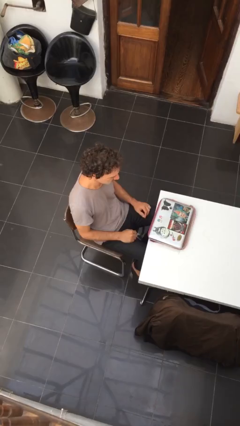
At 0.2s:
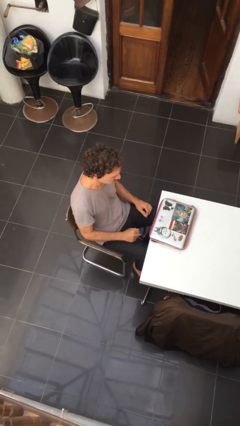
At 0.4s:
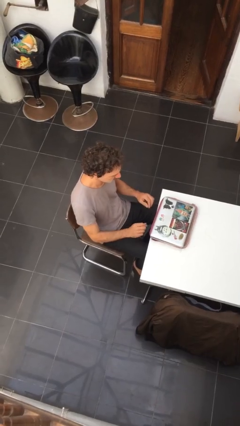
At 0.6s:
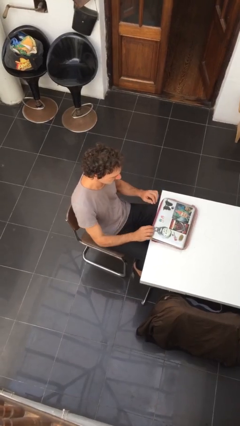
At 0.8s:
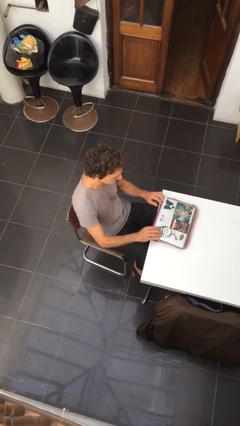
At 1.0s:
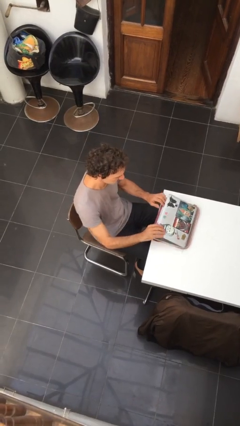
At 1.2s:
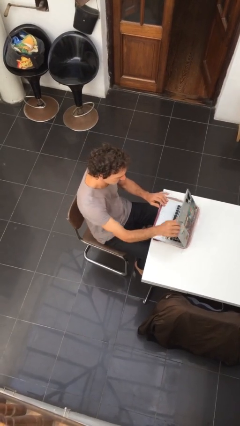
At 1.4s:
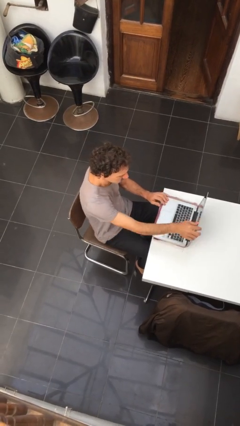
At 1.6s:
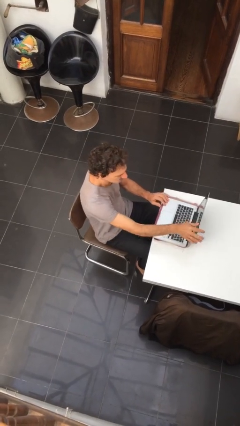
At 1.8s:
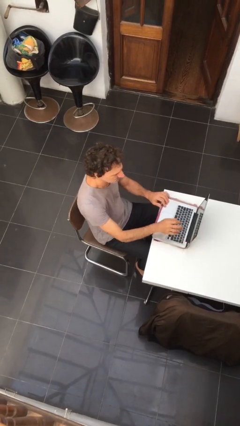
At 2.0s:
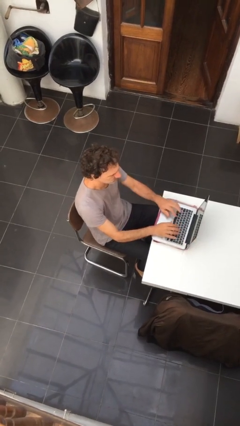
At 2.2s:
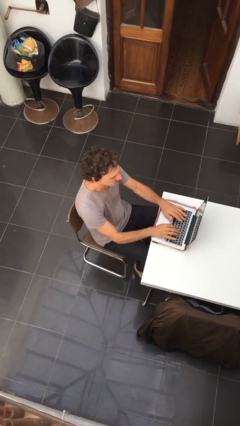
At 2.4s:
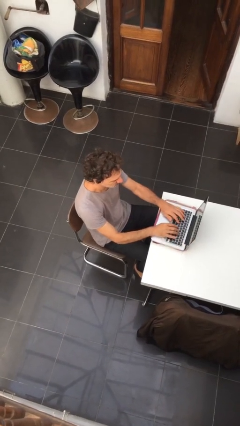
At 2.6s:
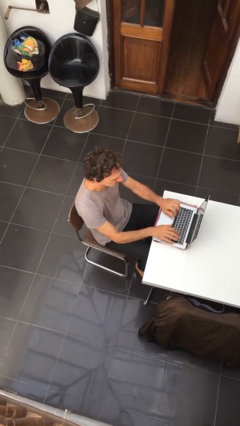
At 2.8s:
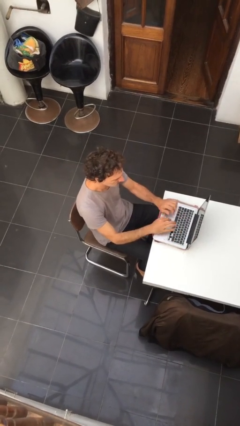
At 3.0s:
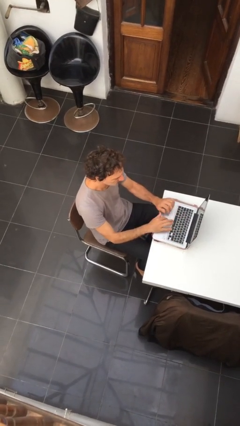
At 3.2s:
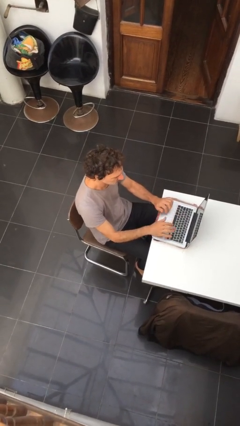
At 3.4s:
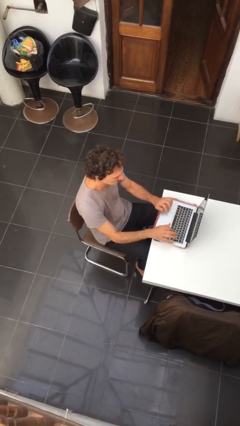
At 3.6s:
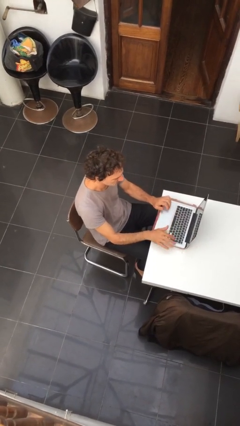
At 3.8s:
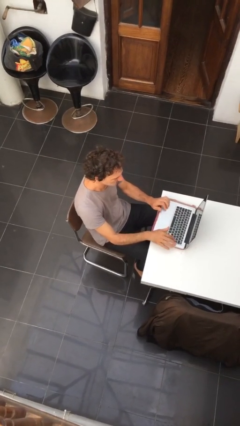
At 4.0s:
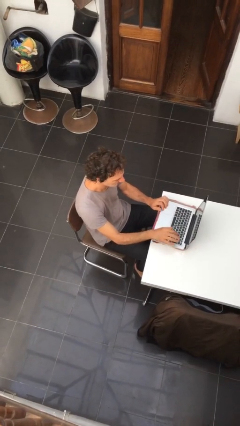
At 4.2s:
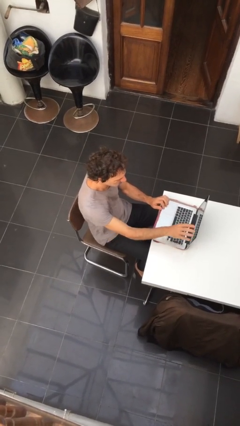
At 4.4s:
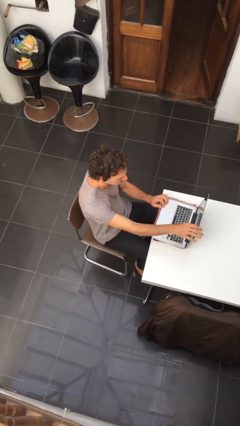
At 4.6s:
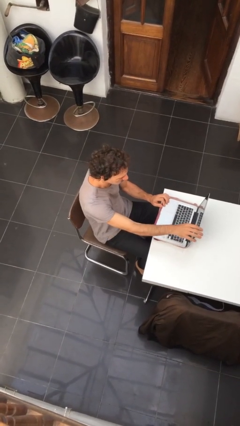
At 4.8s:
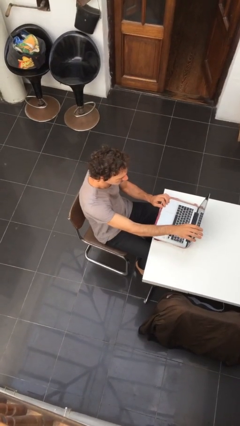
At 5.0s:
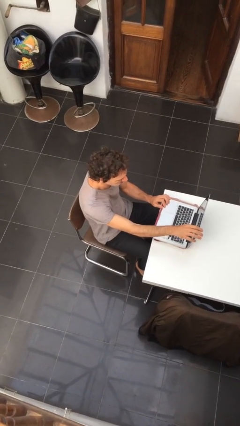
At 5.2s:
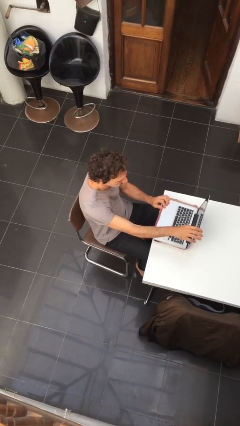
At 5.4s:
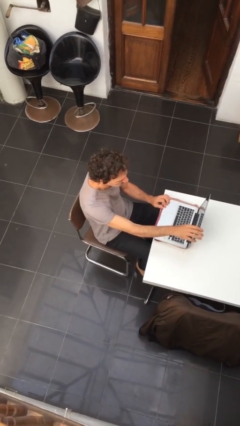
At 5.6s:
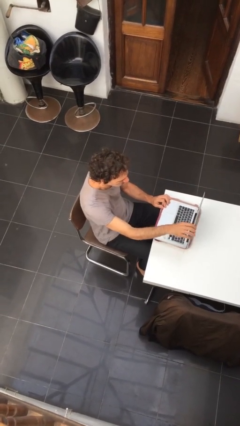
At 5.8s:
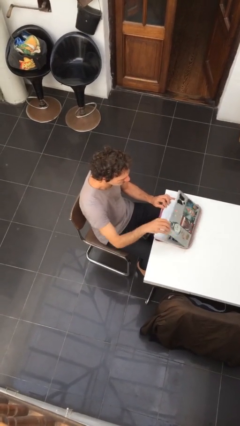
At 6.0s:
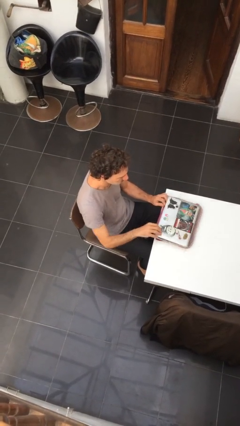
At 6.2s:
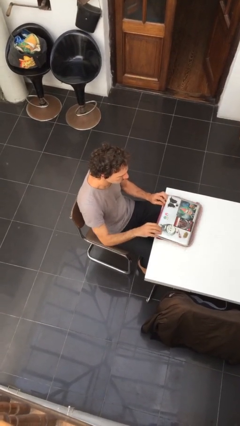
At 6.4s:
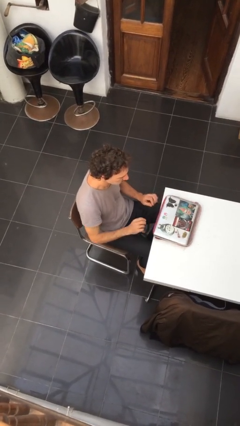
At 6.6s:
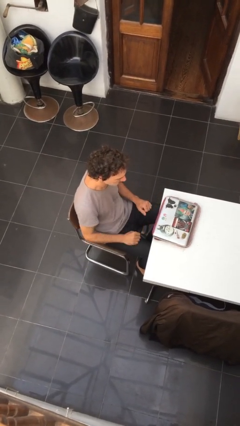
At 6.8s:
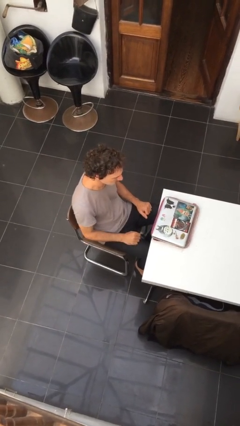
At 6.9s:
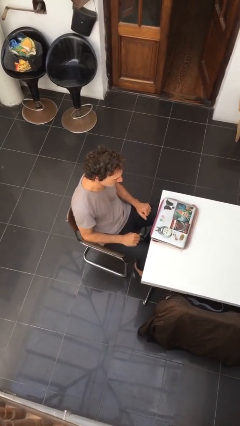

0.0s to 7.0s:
person interacts with laptop

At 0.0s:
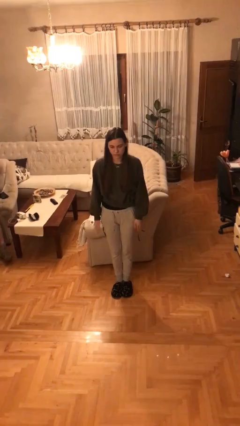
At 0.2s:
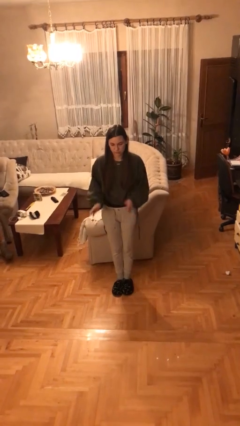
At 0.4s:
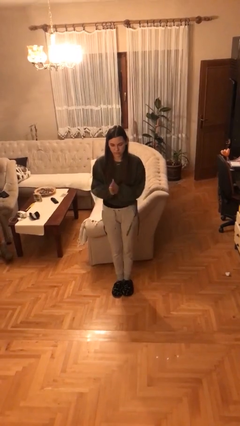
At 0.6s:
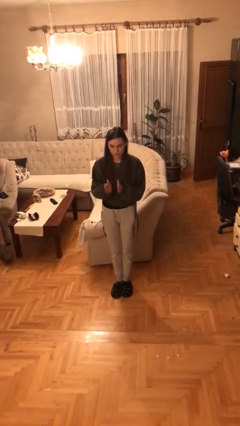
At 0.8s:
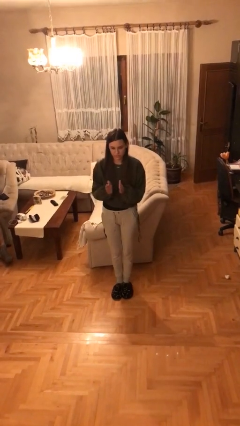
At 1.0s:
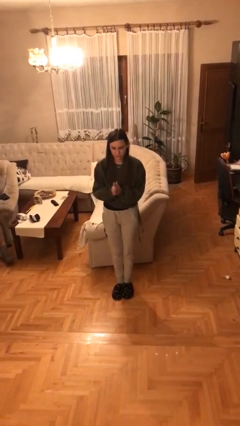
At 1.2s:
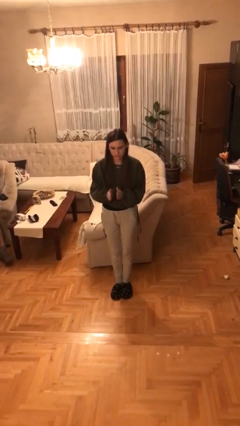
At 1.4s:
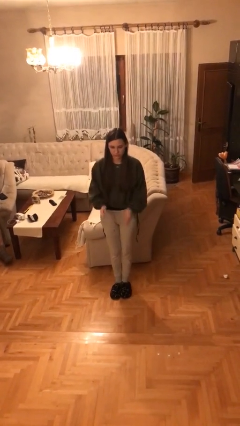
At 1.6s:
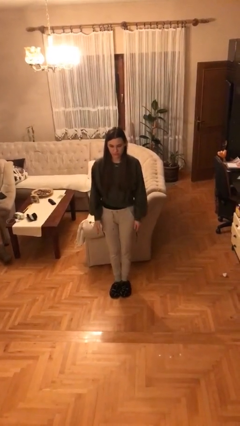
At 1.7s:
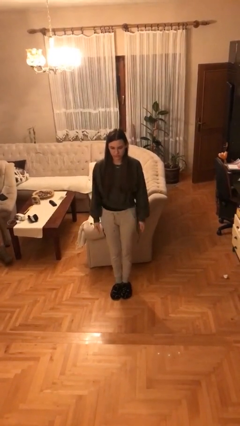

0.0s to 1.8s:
person claps hands

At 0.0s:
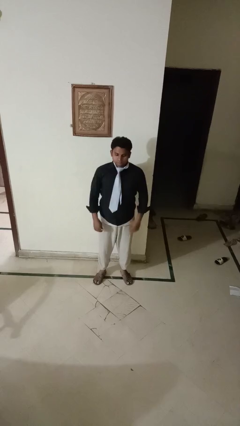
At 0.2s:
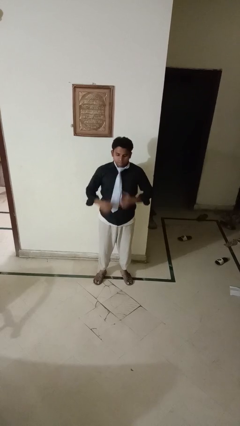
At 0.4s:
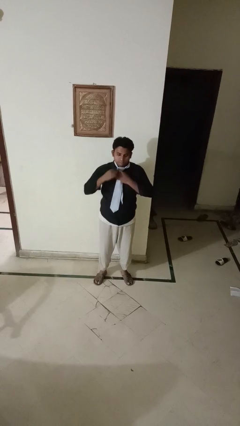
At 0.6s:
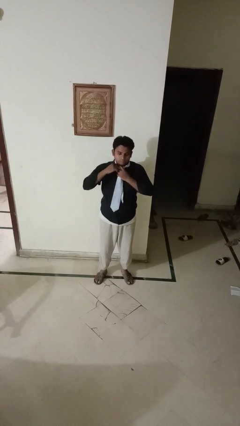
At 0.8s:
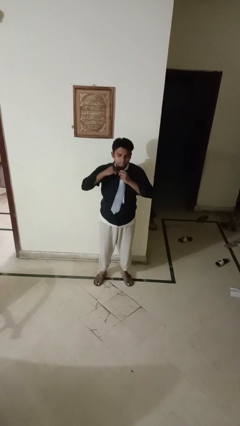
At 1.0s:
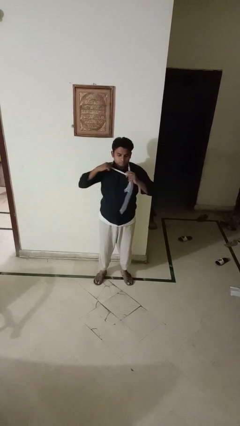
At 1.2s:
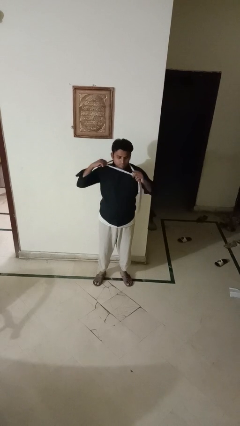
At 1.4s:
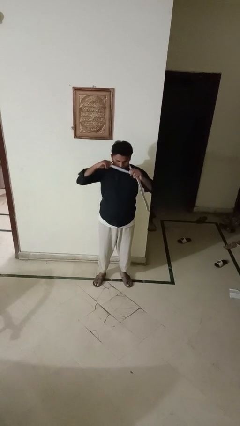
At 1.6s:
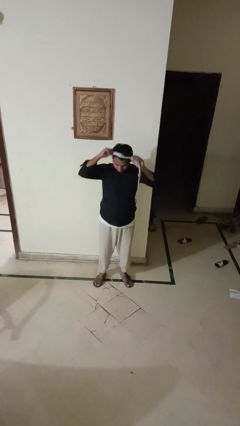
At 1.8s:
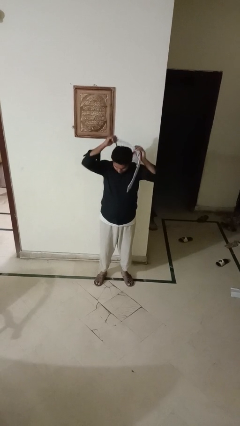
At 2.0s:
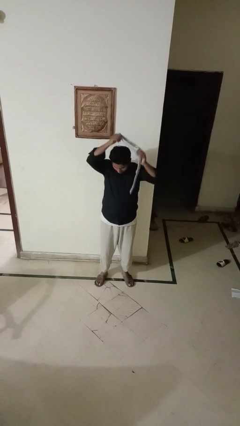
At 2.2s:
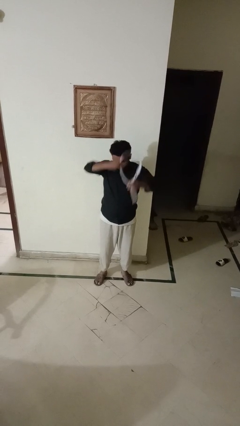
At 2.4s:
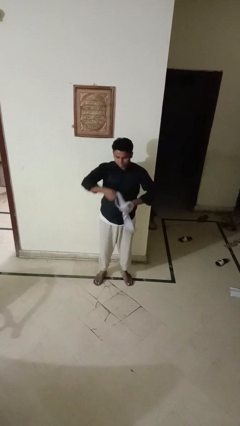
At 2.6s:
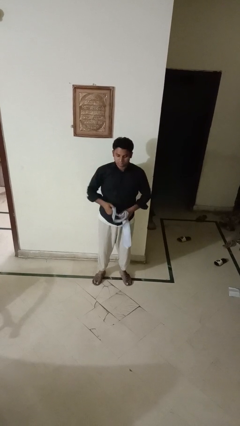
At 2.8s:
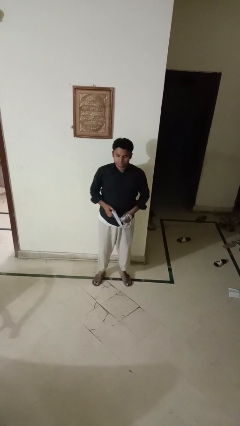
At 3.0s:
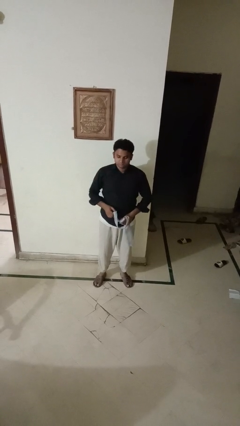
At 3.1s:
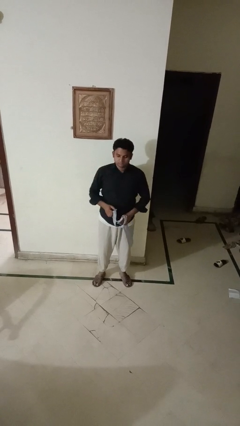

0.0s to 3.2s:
person takes off necktie

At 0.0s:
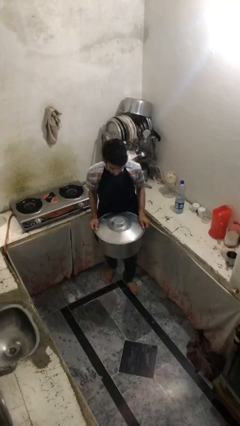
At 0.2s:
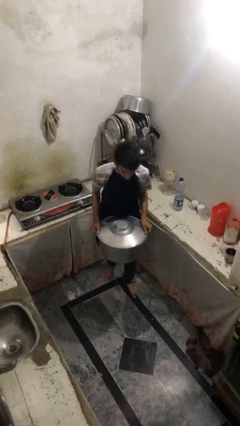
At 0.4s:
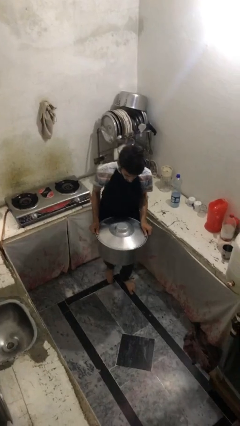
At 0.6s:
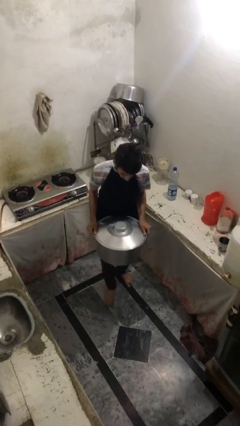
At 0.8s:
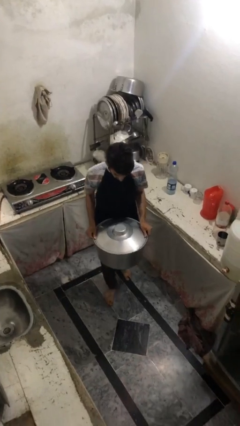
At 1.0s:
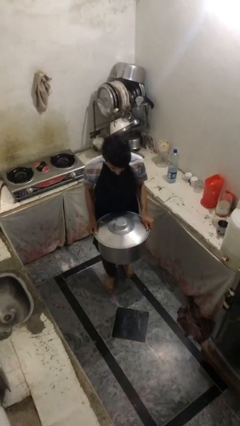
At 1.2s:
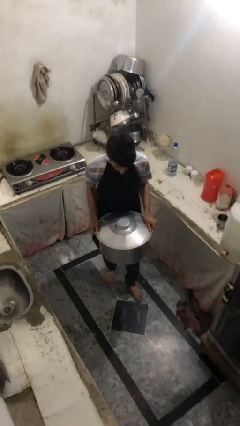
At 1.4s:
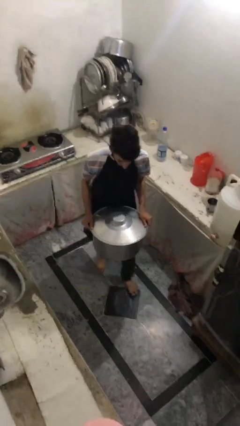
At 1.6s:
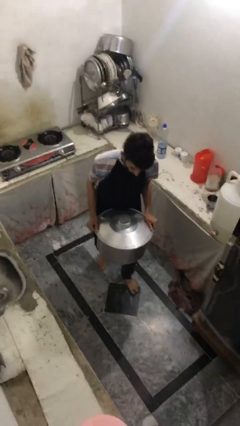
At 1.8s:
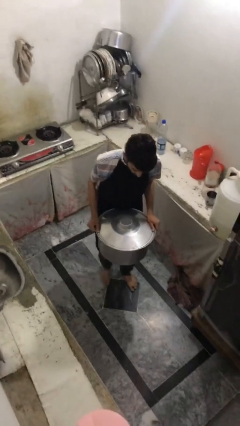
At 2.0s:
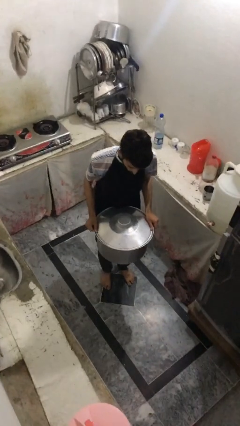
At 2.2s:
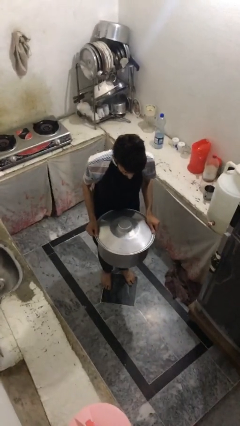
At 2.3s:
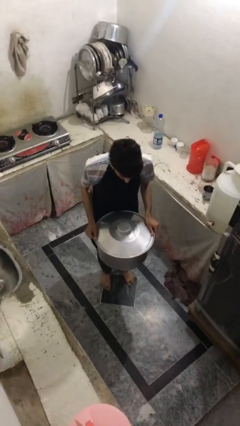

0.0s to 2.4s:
person carries heavy object

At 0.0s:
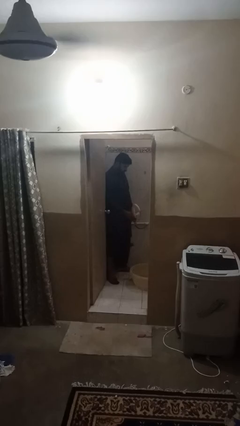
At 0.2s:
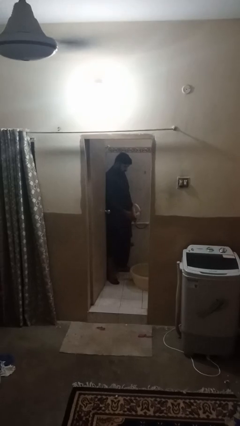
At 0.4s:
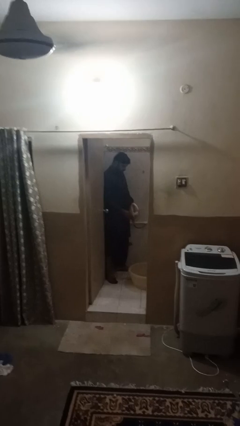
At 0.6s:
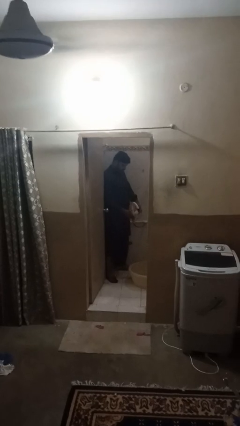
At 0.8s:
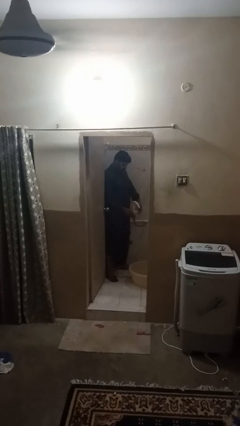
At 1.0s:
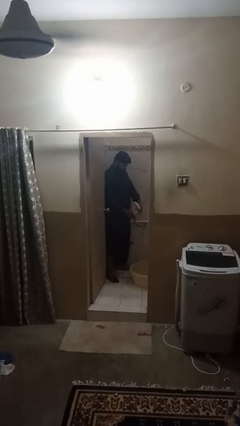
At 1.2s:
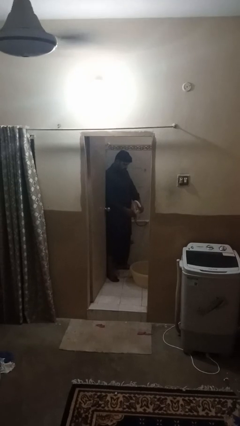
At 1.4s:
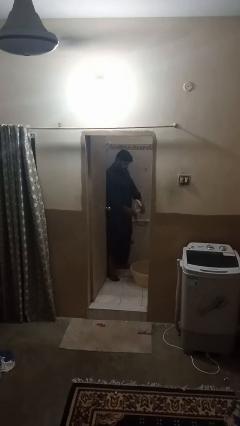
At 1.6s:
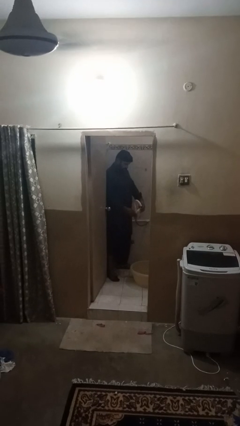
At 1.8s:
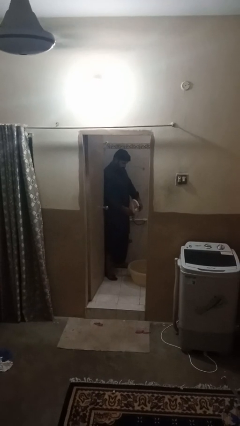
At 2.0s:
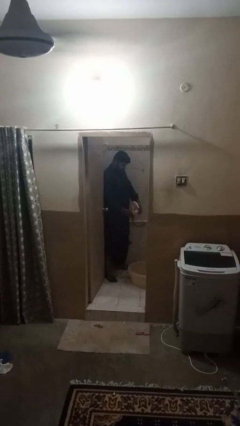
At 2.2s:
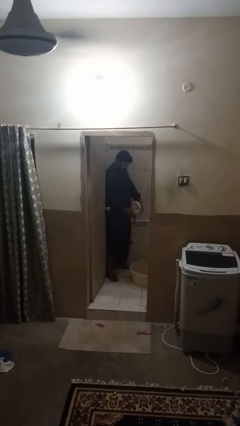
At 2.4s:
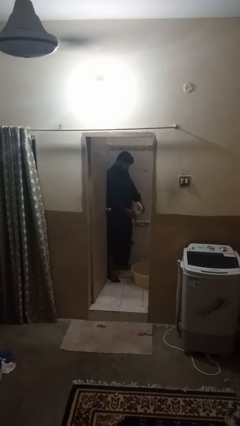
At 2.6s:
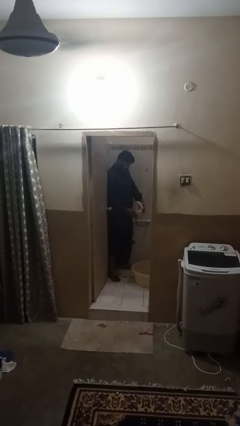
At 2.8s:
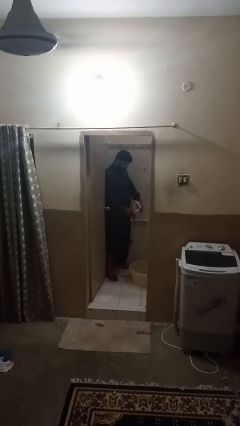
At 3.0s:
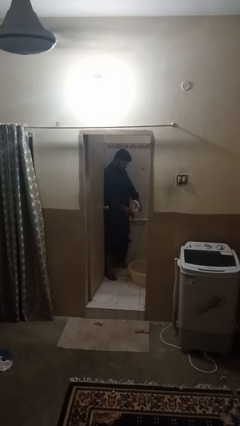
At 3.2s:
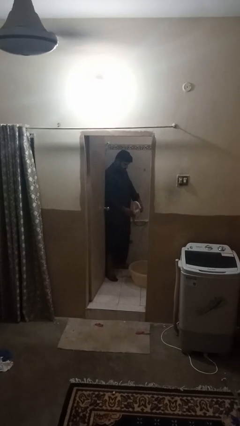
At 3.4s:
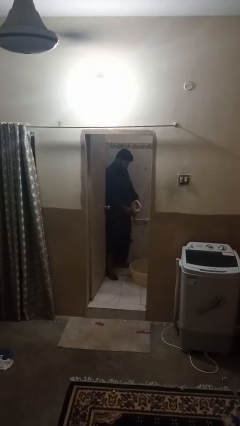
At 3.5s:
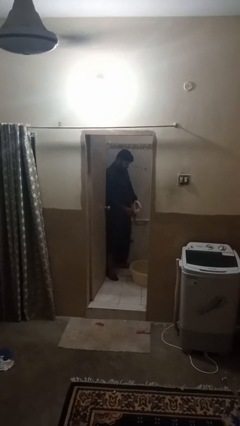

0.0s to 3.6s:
person turns on faucet
